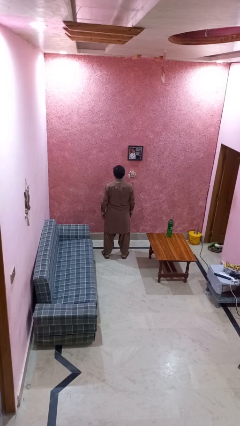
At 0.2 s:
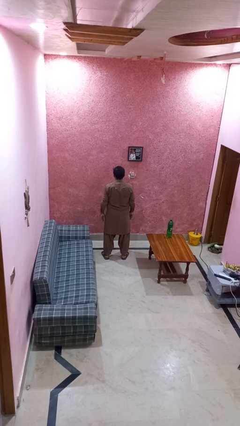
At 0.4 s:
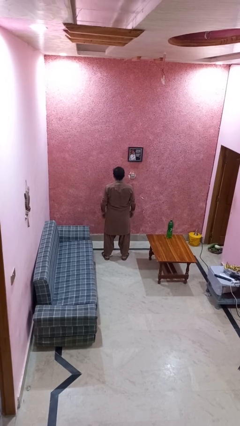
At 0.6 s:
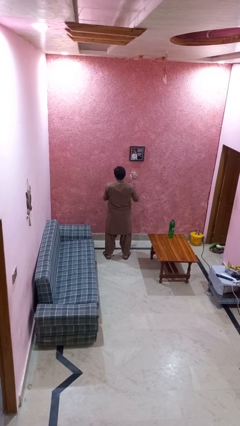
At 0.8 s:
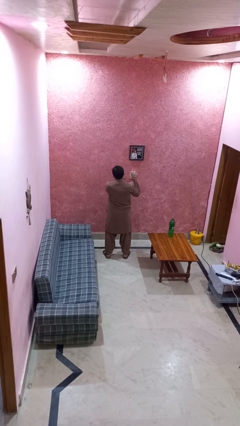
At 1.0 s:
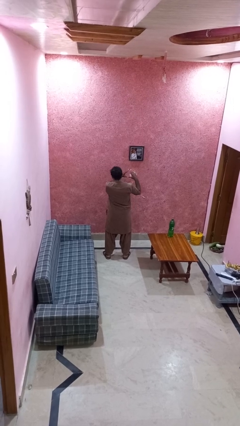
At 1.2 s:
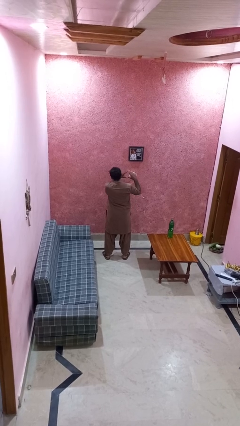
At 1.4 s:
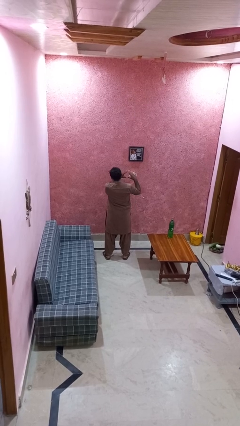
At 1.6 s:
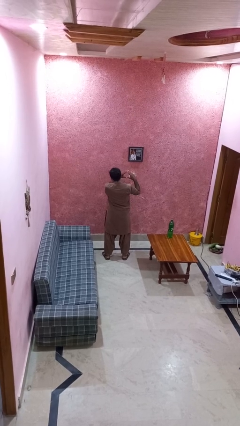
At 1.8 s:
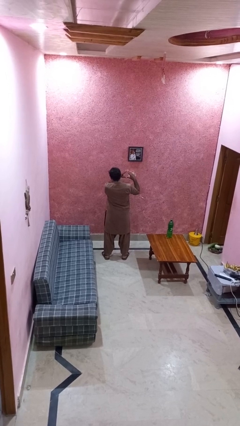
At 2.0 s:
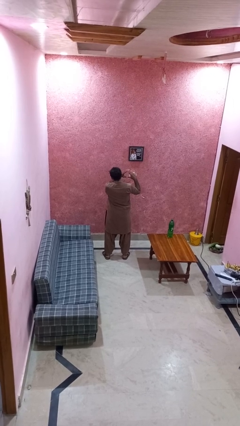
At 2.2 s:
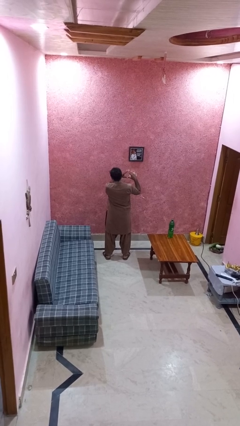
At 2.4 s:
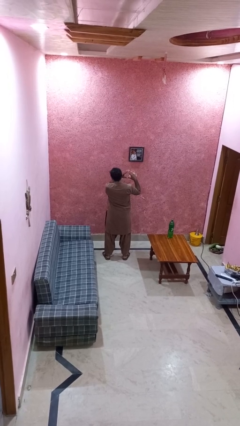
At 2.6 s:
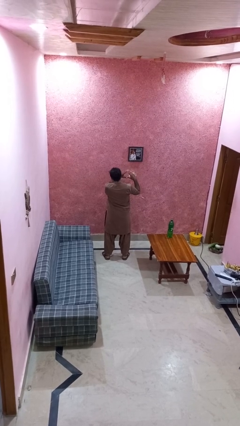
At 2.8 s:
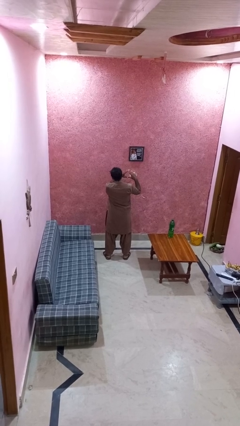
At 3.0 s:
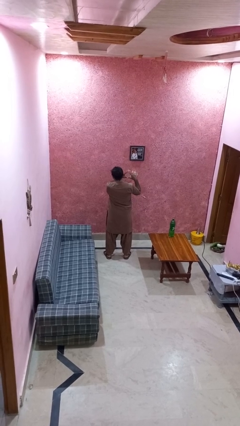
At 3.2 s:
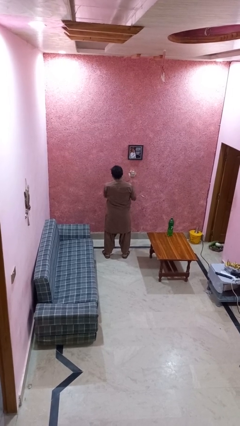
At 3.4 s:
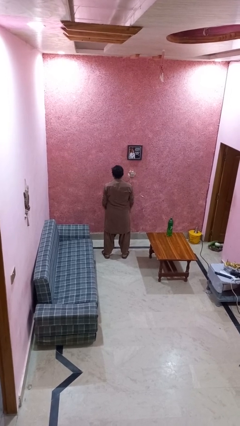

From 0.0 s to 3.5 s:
person gestures heart

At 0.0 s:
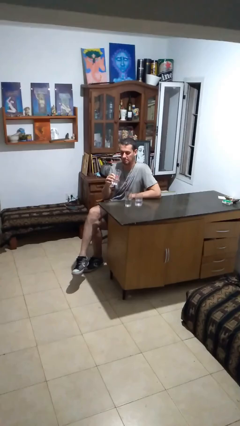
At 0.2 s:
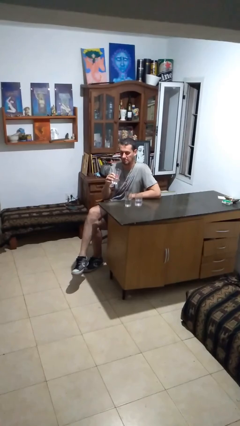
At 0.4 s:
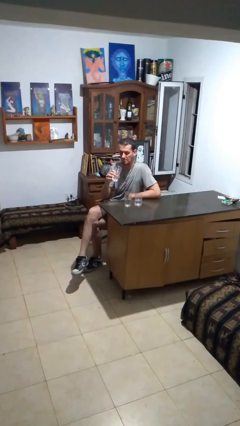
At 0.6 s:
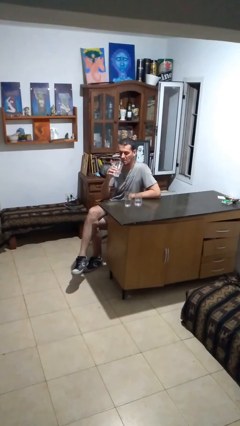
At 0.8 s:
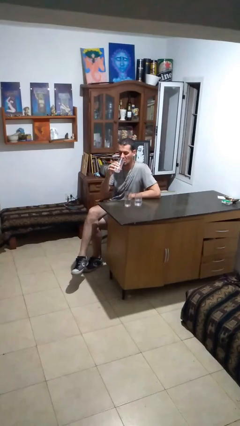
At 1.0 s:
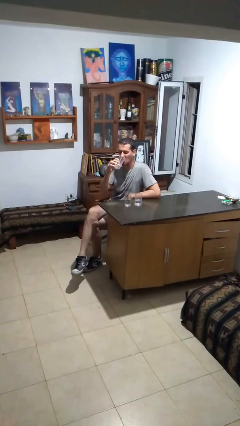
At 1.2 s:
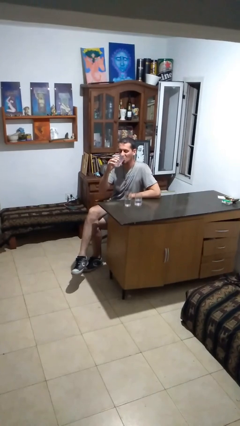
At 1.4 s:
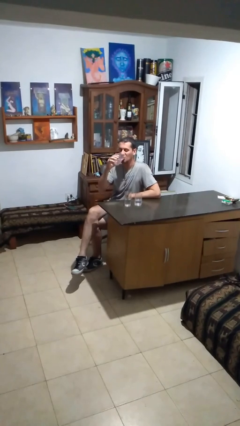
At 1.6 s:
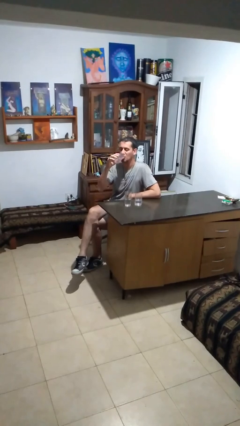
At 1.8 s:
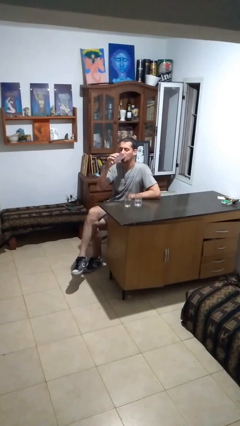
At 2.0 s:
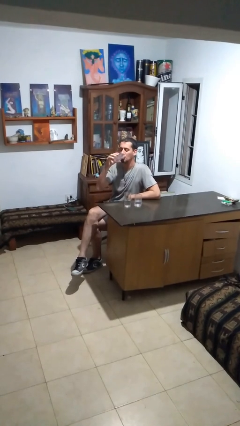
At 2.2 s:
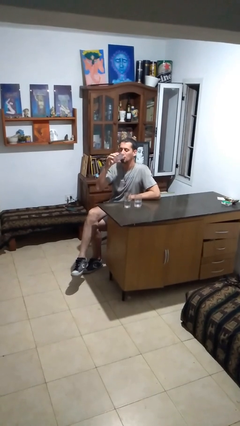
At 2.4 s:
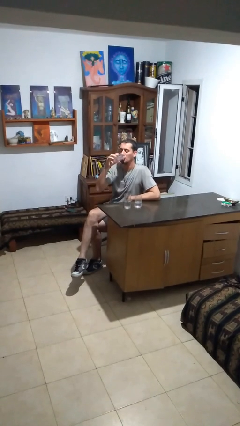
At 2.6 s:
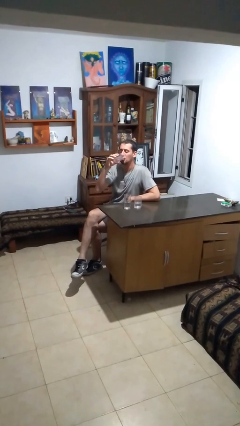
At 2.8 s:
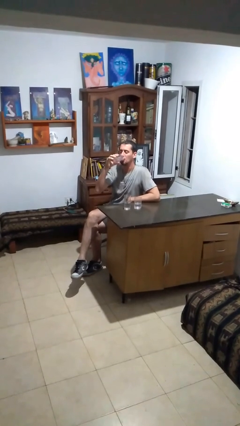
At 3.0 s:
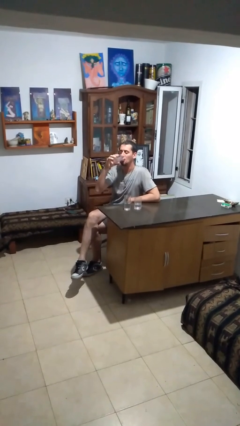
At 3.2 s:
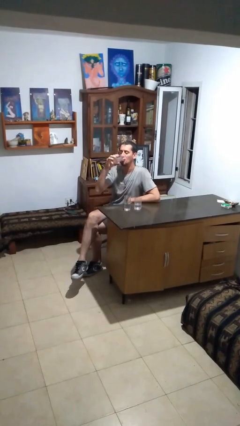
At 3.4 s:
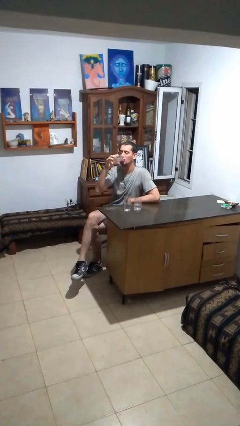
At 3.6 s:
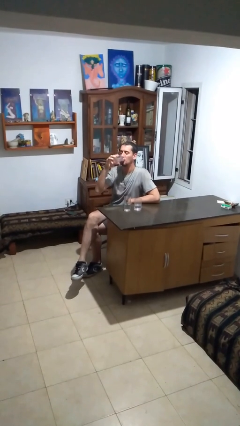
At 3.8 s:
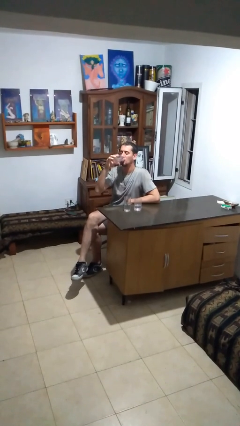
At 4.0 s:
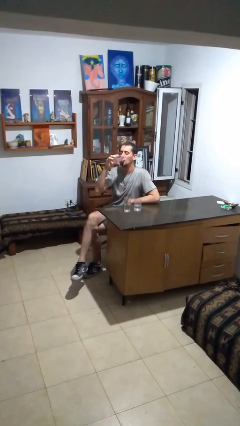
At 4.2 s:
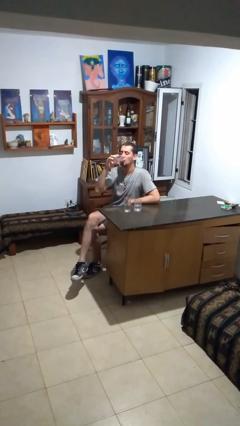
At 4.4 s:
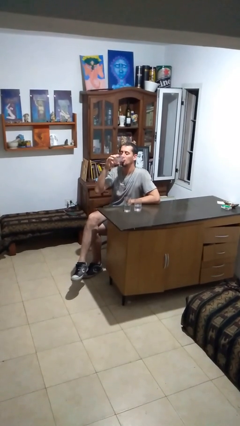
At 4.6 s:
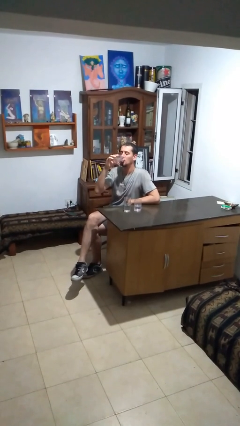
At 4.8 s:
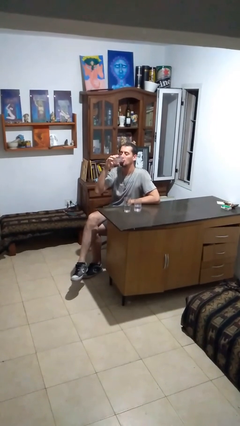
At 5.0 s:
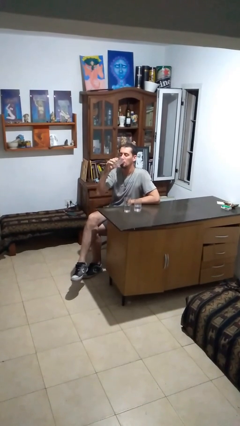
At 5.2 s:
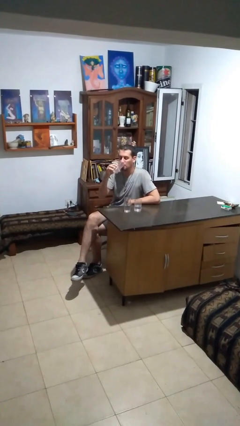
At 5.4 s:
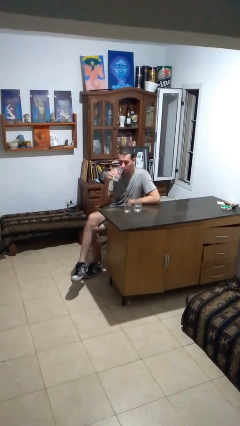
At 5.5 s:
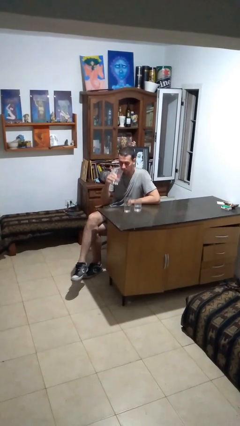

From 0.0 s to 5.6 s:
person drinks from shotglass

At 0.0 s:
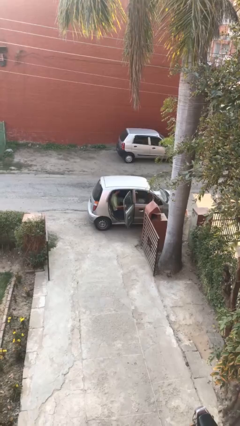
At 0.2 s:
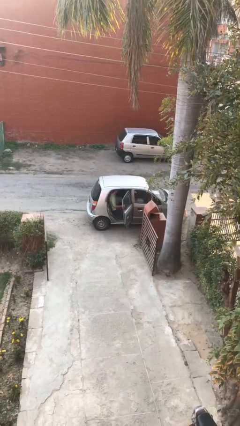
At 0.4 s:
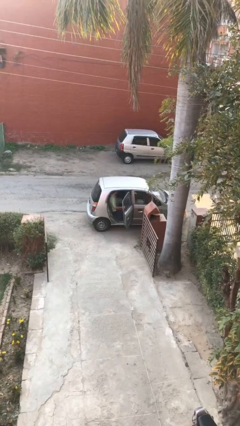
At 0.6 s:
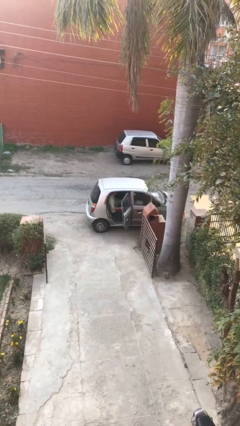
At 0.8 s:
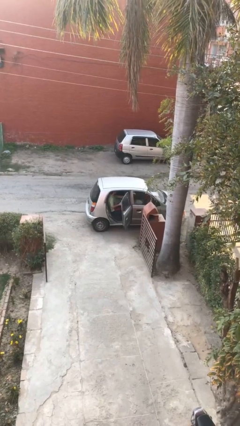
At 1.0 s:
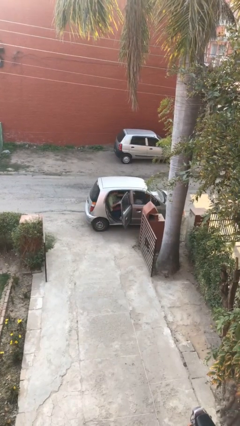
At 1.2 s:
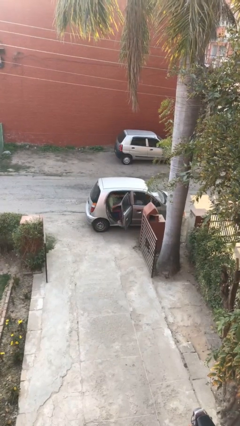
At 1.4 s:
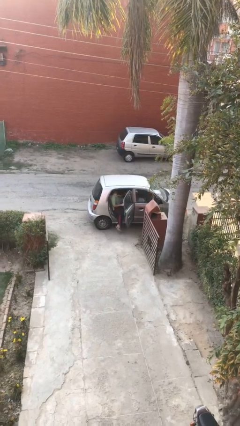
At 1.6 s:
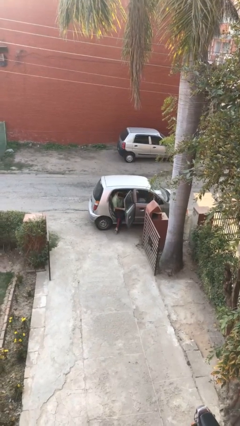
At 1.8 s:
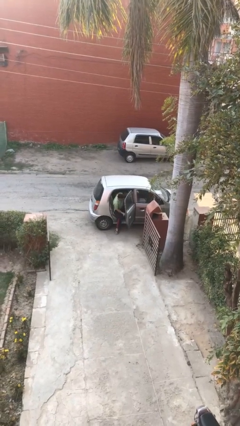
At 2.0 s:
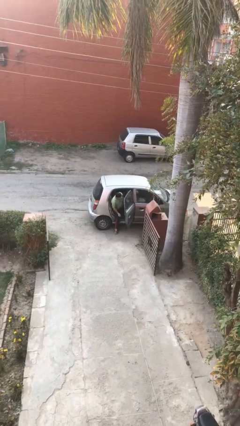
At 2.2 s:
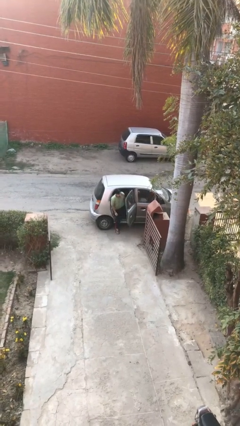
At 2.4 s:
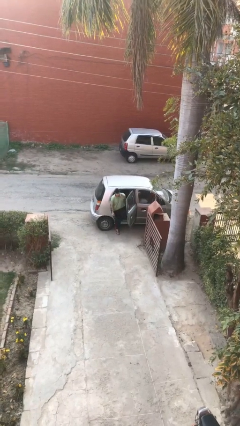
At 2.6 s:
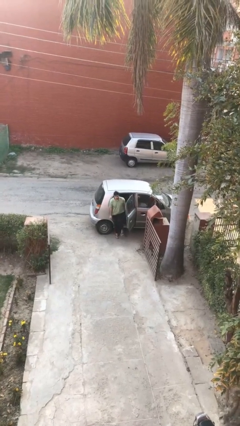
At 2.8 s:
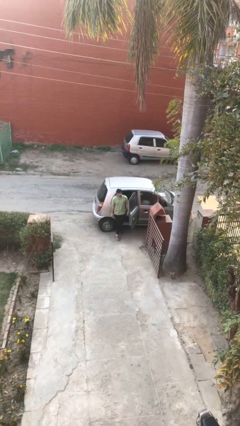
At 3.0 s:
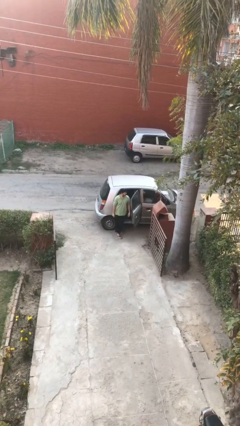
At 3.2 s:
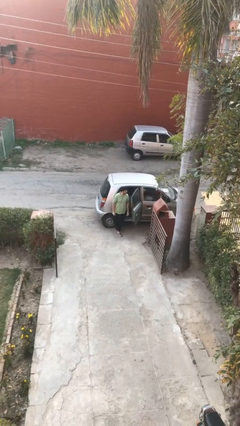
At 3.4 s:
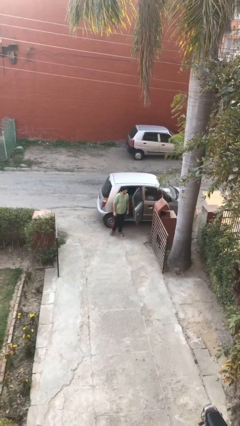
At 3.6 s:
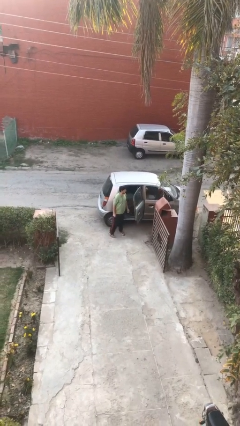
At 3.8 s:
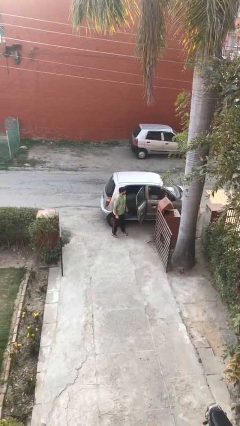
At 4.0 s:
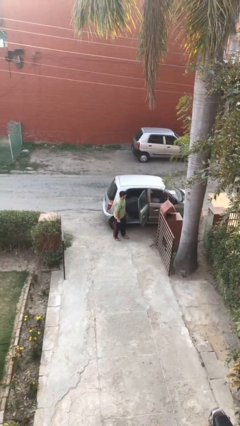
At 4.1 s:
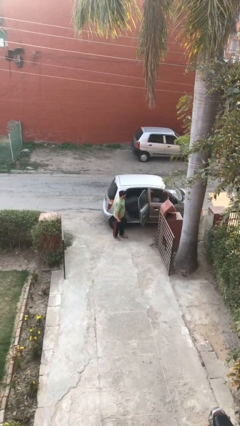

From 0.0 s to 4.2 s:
person exits car

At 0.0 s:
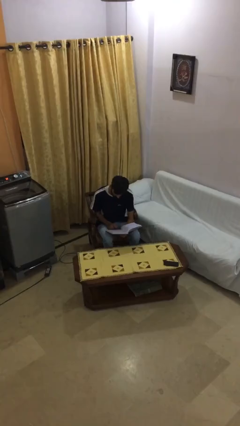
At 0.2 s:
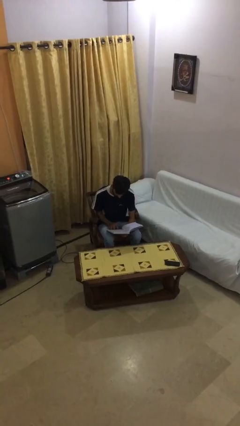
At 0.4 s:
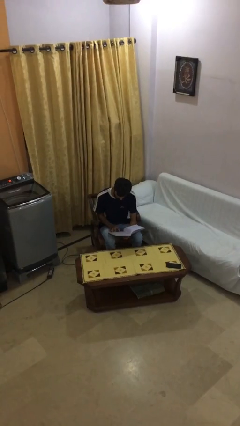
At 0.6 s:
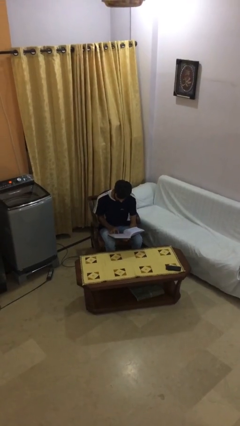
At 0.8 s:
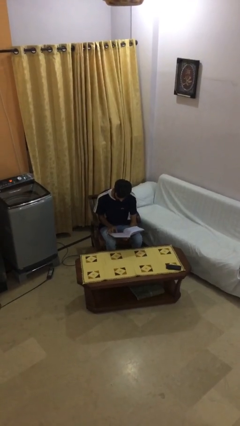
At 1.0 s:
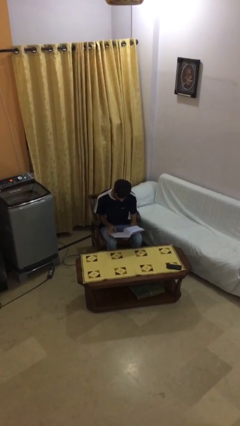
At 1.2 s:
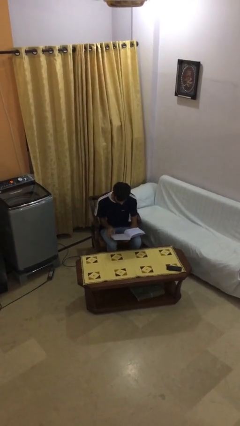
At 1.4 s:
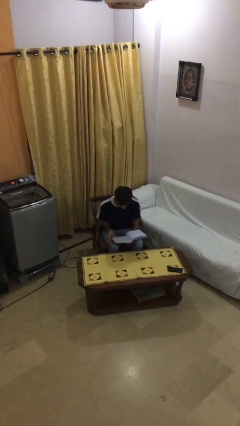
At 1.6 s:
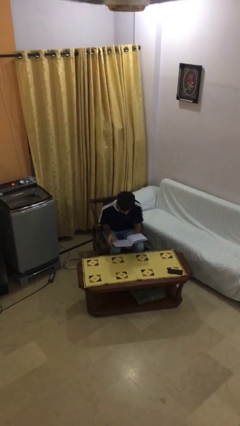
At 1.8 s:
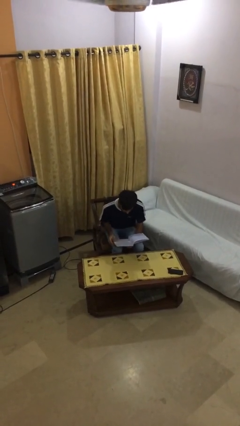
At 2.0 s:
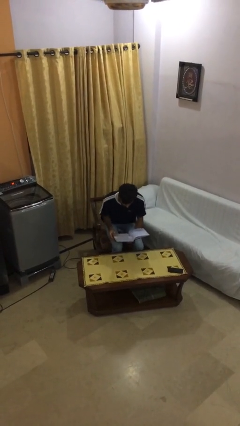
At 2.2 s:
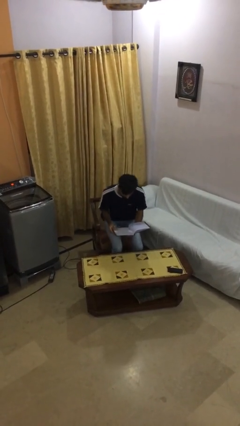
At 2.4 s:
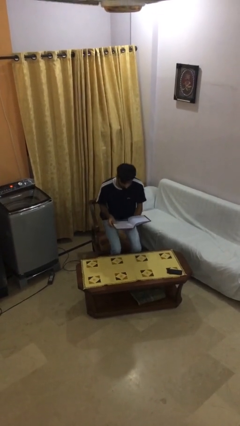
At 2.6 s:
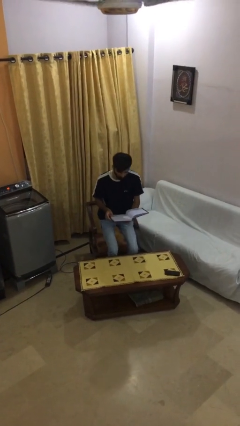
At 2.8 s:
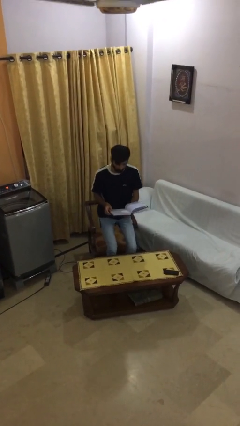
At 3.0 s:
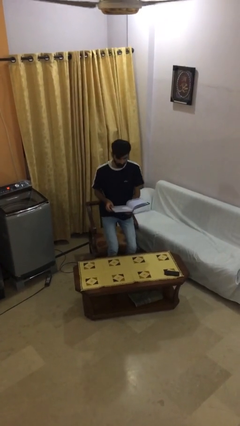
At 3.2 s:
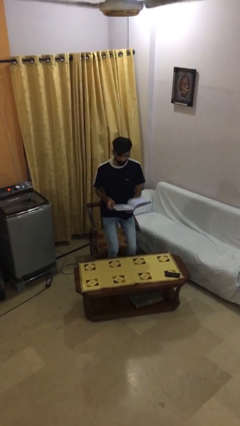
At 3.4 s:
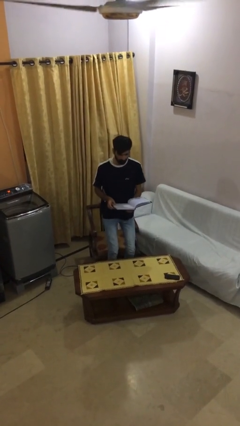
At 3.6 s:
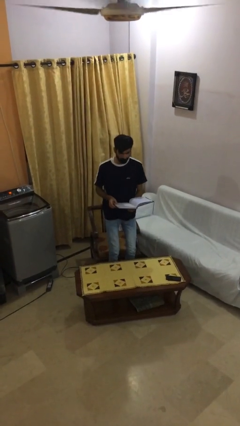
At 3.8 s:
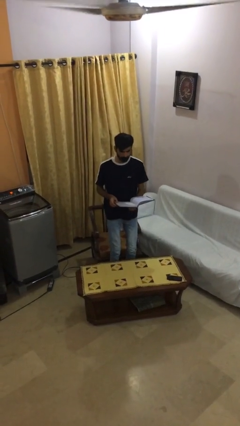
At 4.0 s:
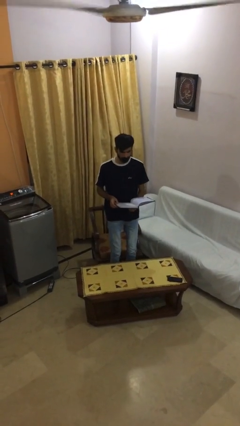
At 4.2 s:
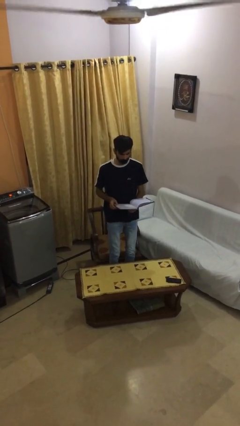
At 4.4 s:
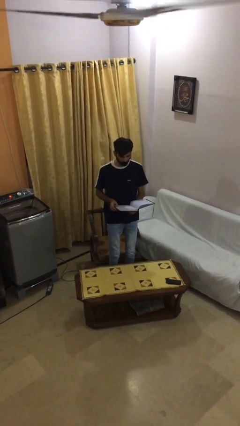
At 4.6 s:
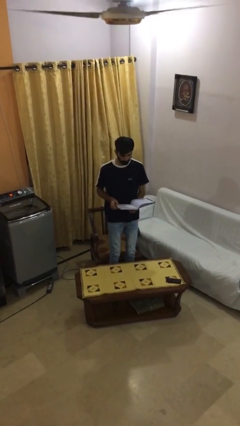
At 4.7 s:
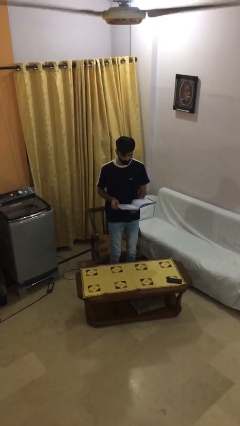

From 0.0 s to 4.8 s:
person stands up
